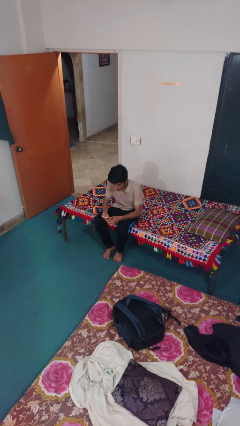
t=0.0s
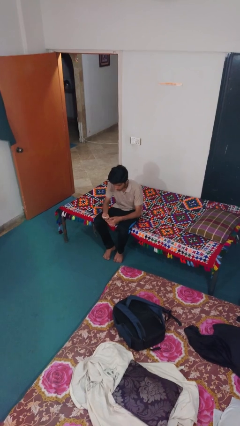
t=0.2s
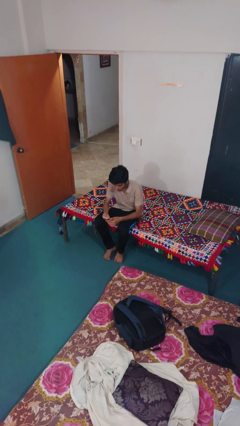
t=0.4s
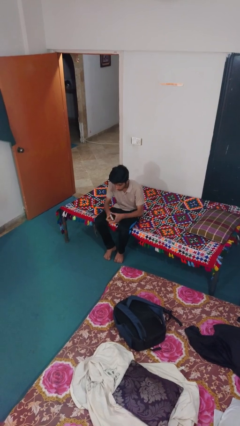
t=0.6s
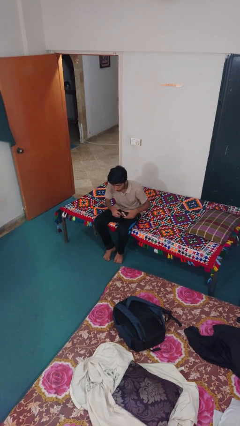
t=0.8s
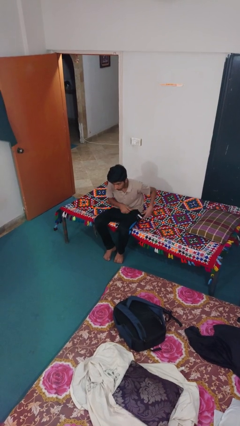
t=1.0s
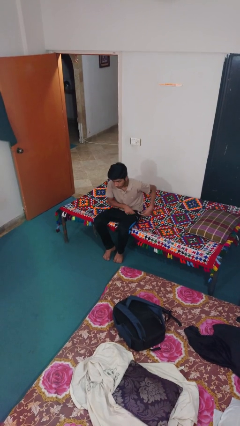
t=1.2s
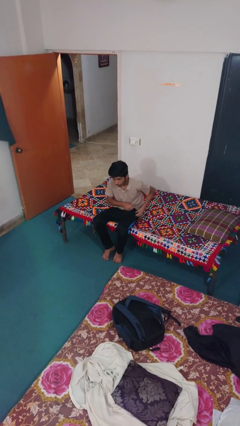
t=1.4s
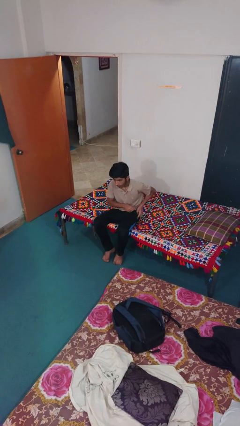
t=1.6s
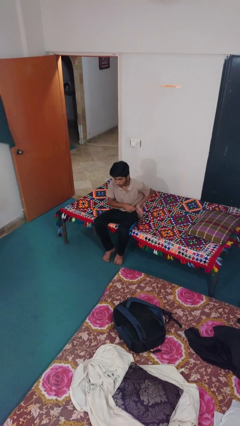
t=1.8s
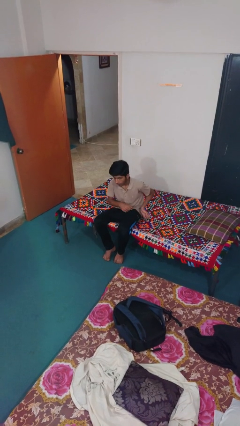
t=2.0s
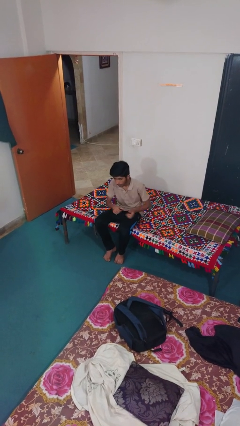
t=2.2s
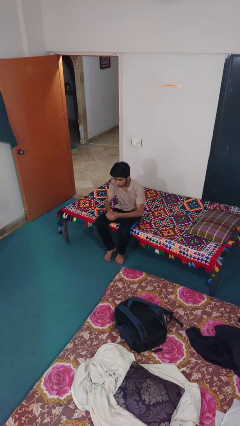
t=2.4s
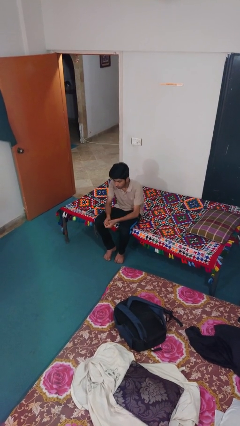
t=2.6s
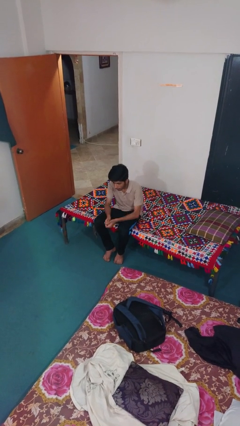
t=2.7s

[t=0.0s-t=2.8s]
person puts phone into pocket

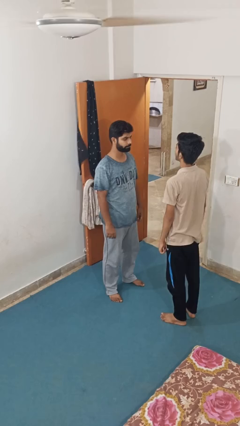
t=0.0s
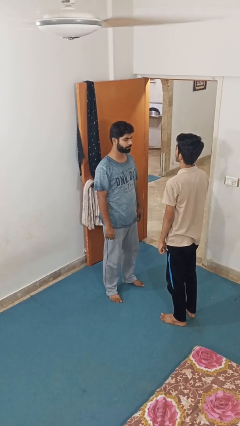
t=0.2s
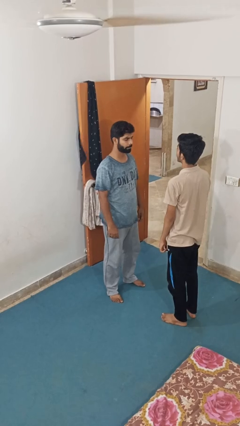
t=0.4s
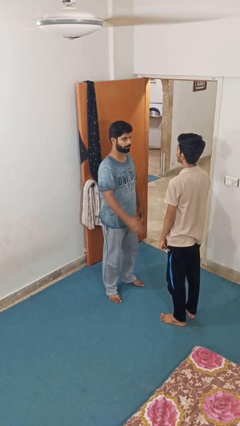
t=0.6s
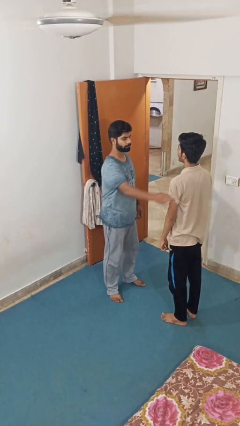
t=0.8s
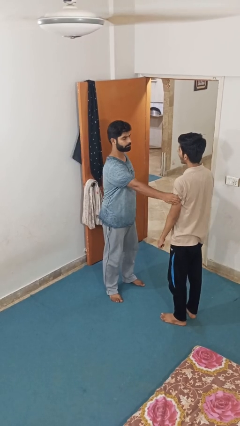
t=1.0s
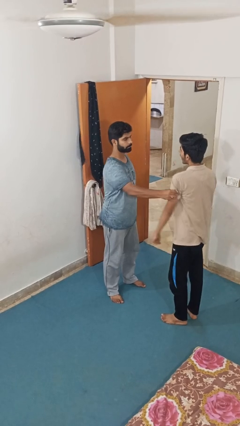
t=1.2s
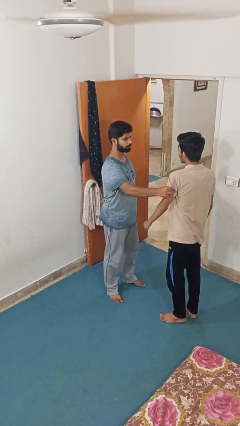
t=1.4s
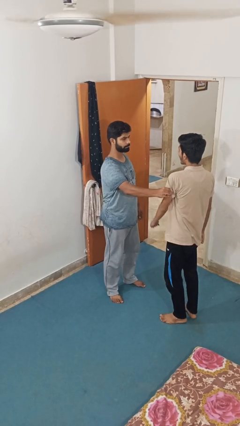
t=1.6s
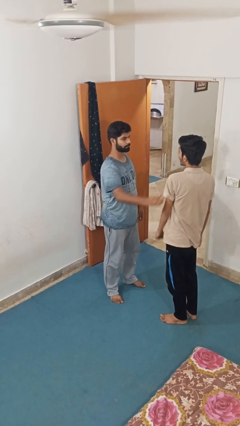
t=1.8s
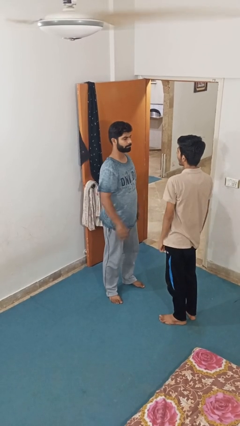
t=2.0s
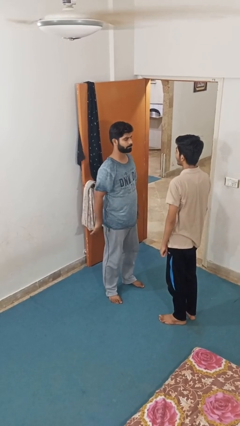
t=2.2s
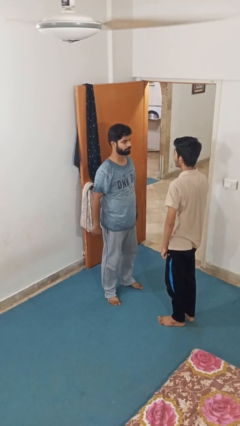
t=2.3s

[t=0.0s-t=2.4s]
person grabs person by bicep

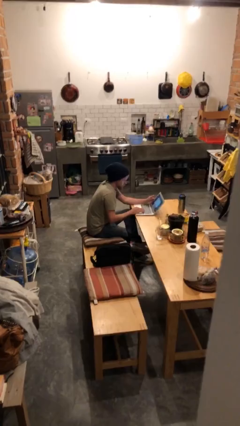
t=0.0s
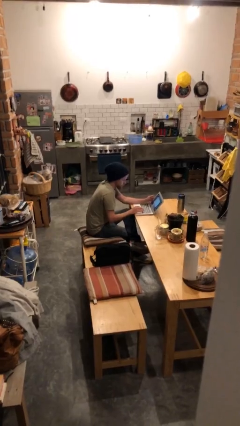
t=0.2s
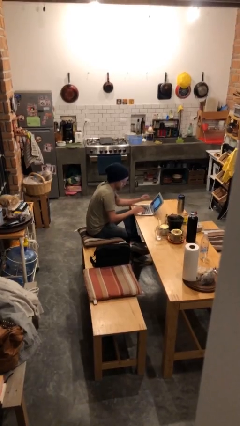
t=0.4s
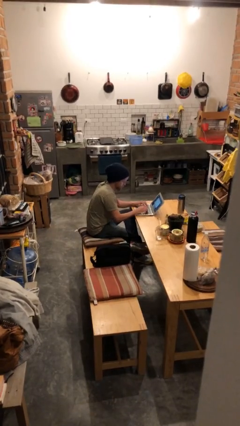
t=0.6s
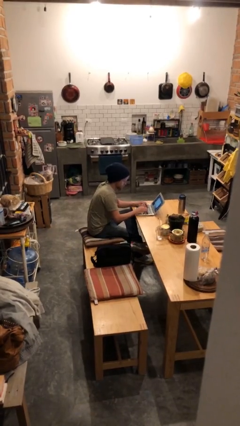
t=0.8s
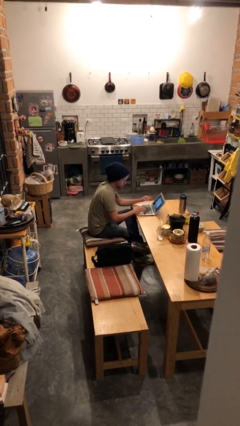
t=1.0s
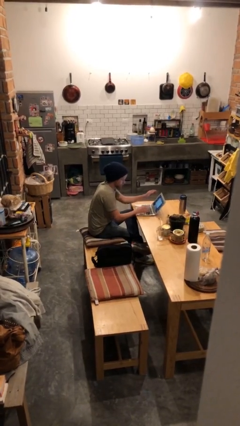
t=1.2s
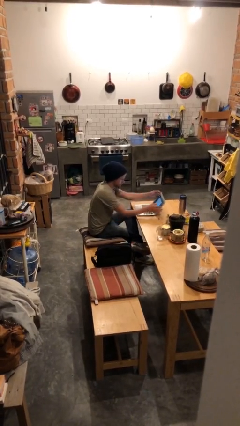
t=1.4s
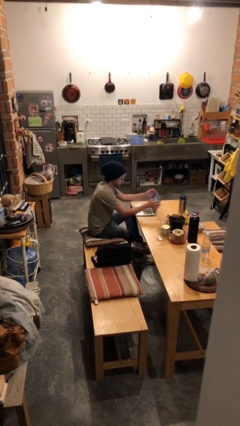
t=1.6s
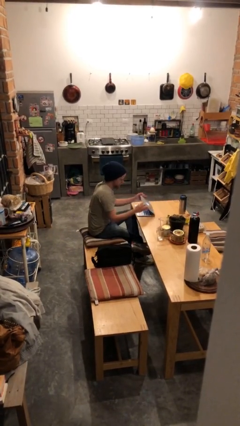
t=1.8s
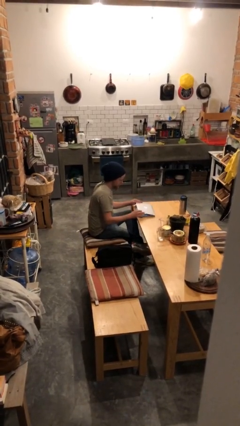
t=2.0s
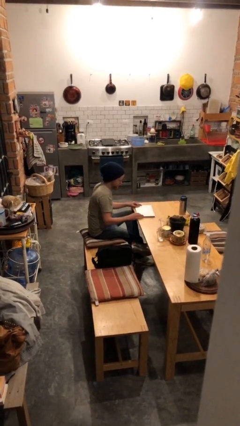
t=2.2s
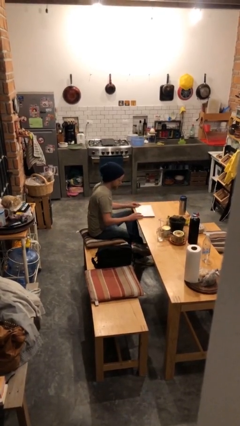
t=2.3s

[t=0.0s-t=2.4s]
person interacts with laptop

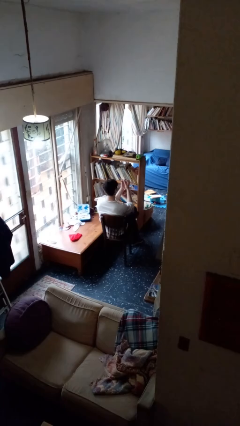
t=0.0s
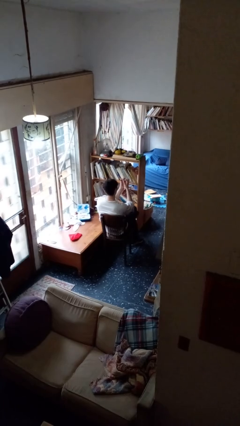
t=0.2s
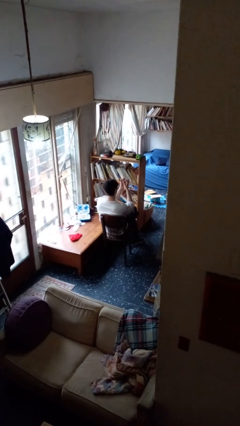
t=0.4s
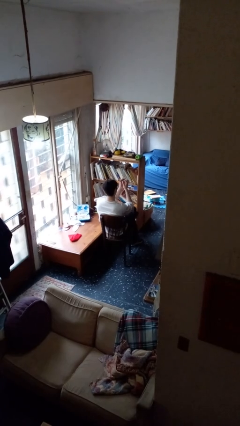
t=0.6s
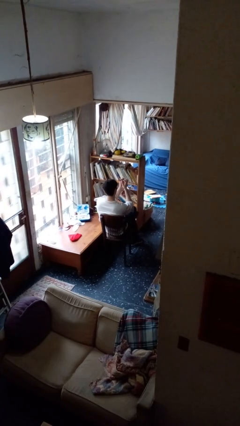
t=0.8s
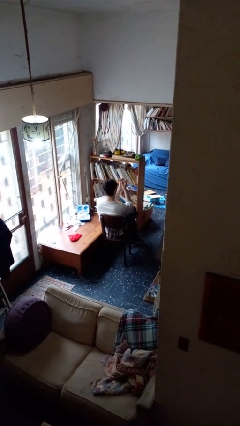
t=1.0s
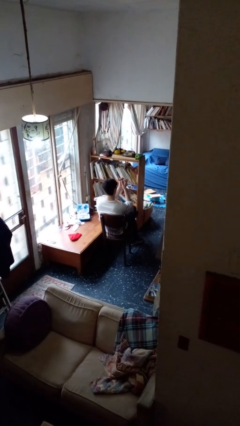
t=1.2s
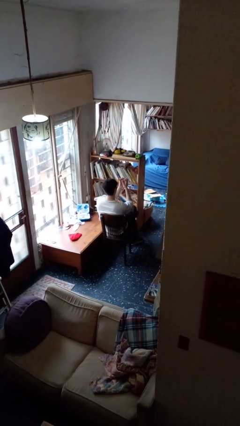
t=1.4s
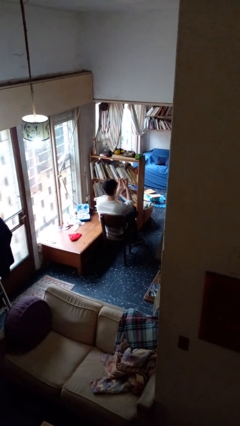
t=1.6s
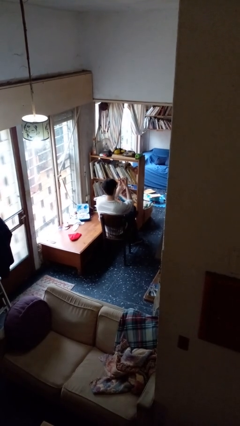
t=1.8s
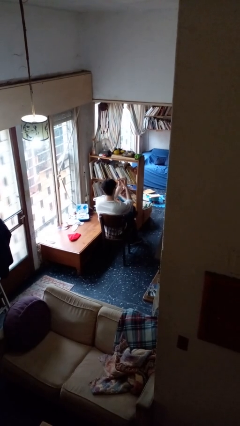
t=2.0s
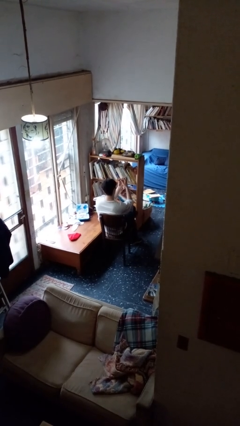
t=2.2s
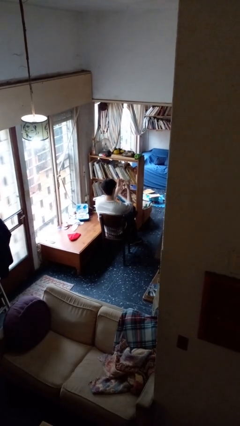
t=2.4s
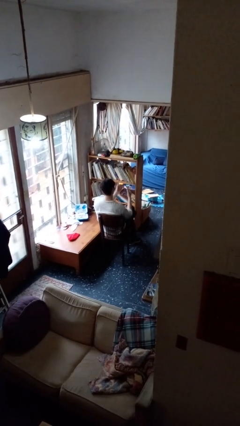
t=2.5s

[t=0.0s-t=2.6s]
person files fingernails

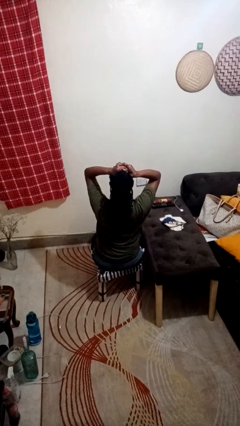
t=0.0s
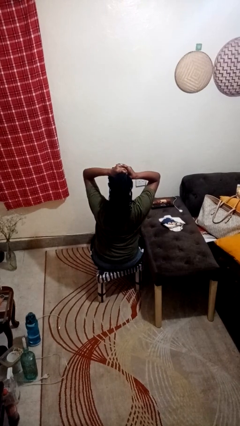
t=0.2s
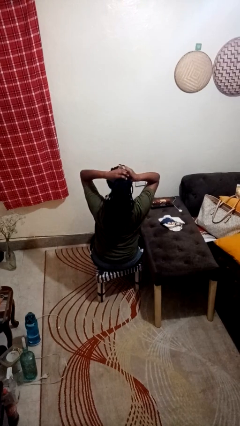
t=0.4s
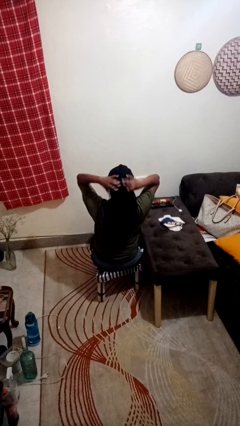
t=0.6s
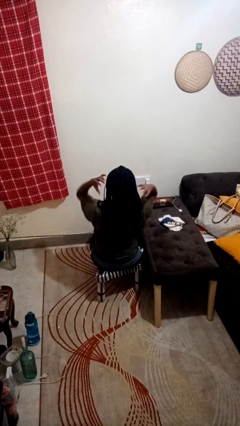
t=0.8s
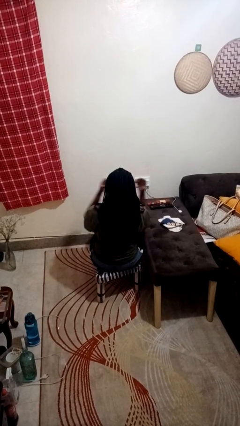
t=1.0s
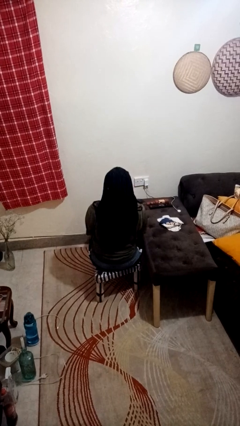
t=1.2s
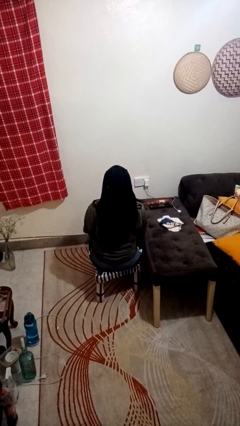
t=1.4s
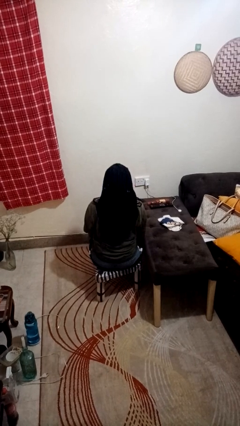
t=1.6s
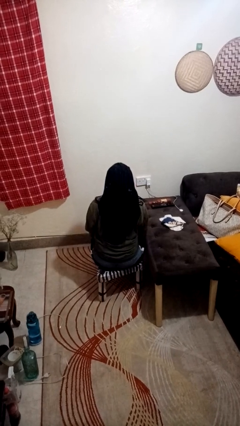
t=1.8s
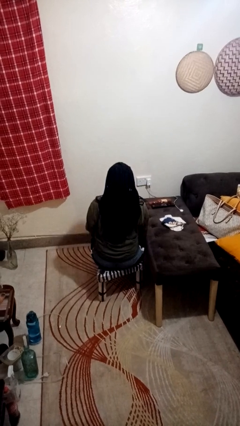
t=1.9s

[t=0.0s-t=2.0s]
person takes off hairtie

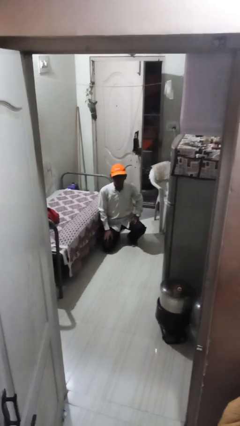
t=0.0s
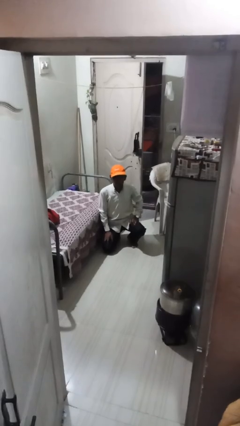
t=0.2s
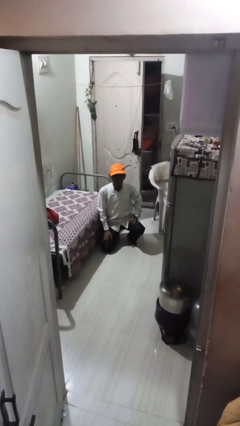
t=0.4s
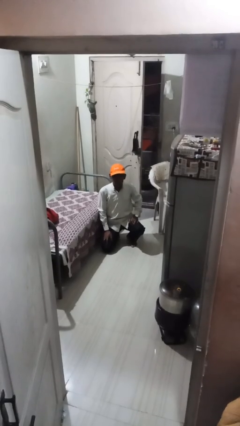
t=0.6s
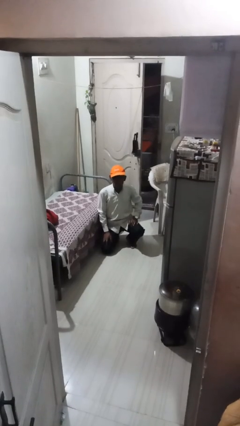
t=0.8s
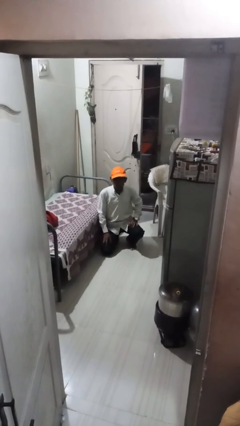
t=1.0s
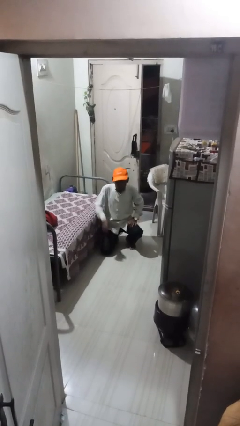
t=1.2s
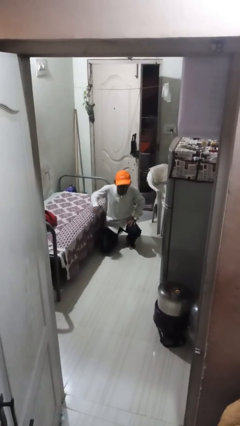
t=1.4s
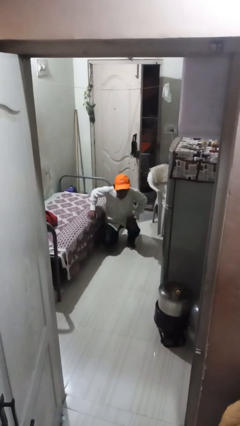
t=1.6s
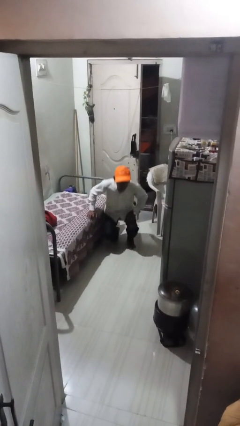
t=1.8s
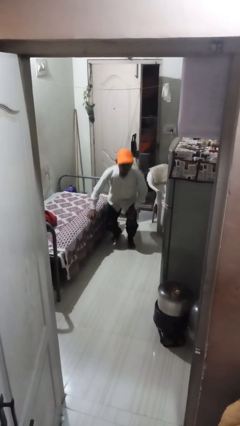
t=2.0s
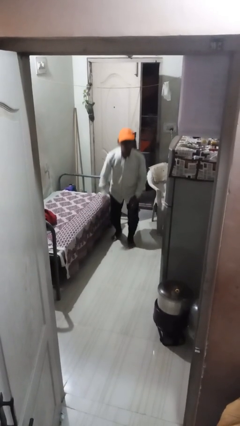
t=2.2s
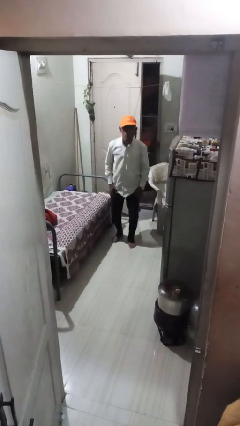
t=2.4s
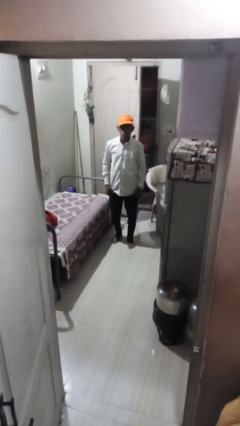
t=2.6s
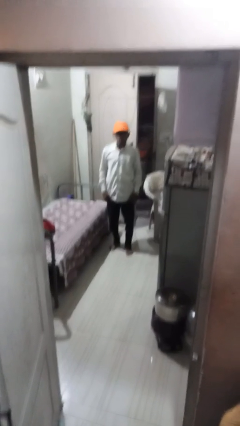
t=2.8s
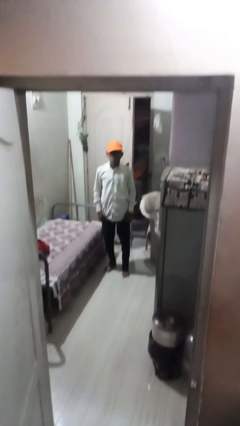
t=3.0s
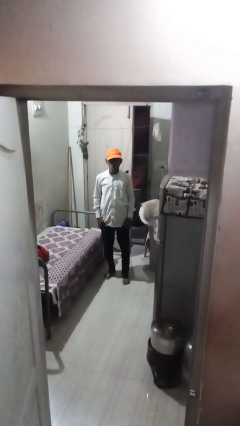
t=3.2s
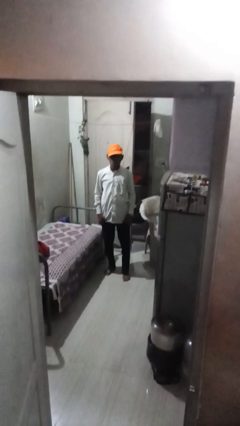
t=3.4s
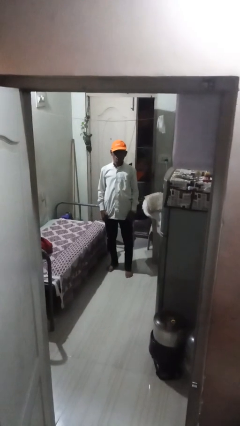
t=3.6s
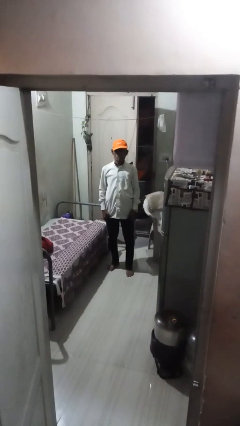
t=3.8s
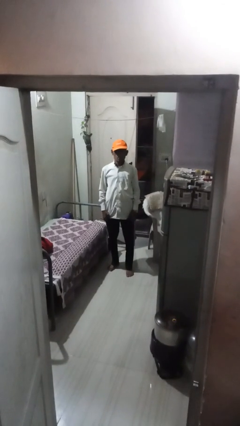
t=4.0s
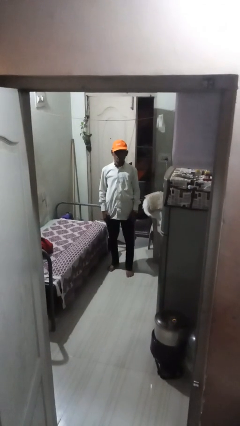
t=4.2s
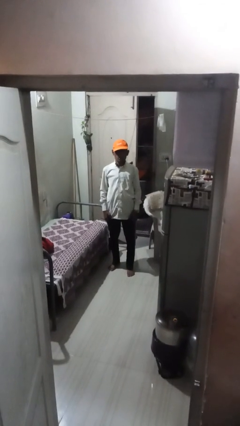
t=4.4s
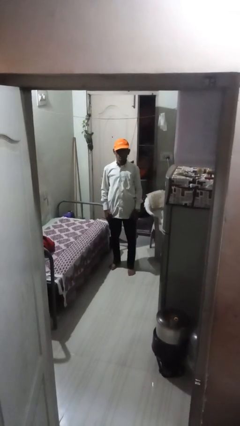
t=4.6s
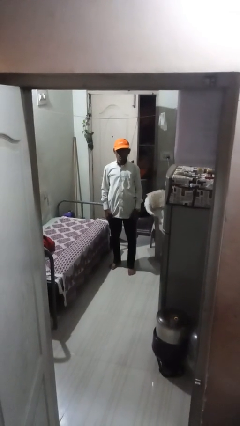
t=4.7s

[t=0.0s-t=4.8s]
person stands up from floor
